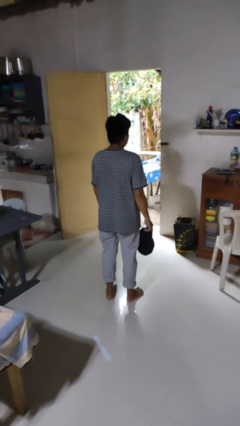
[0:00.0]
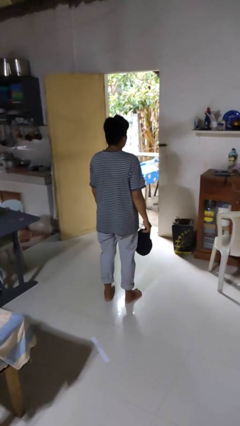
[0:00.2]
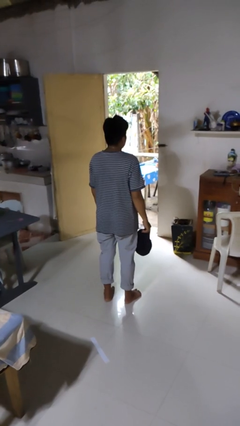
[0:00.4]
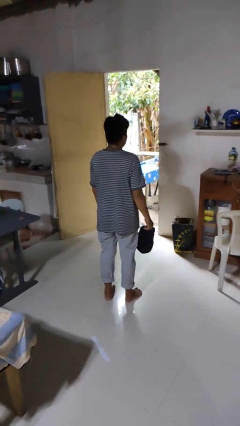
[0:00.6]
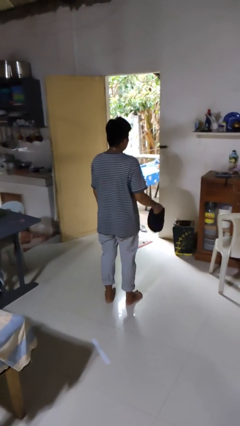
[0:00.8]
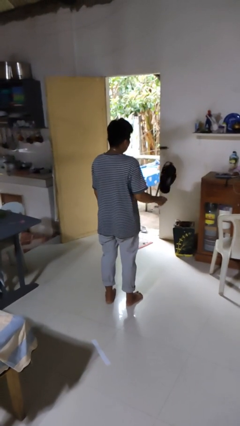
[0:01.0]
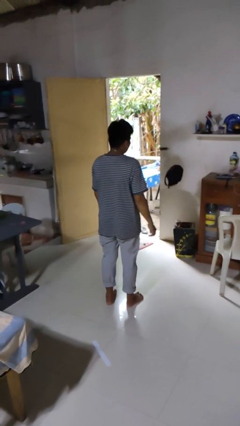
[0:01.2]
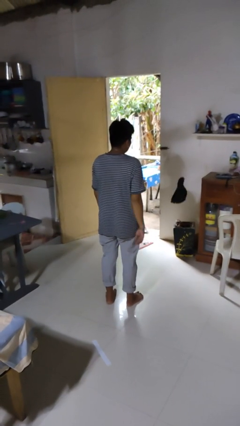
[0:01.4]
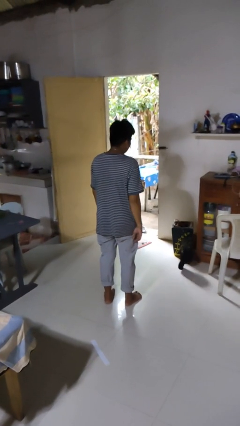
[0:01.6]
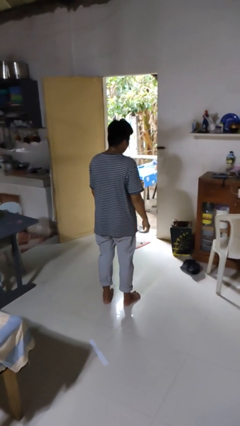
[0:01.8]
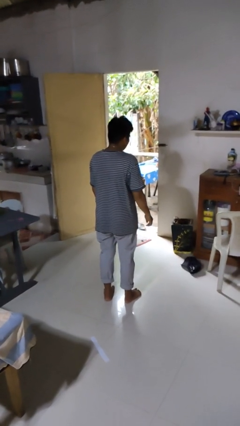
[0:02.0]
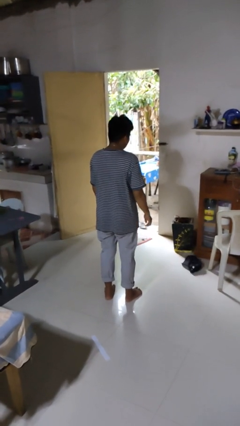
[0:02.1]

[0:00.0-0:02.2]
person throws object into air

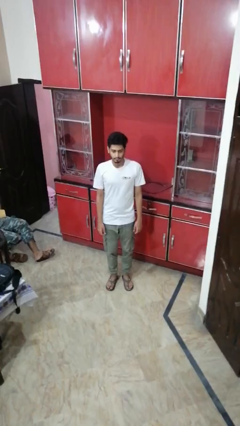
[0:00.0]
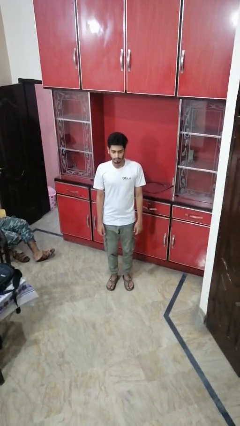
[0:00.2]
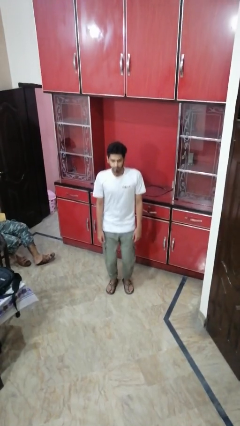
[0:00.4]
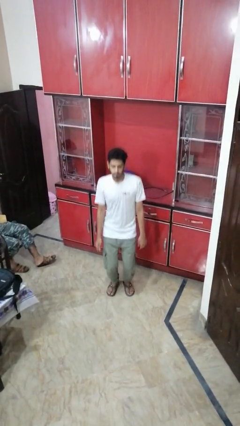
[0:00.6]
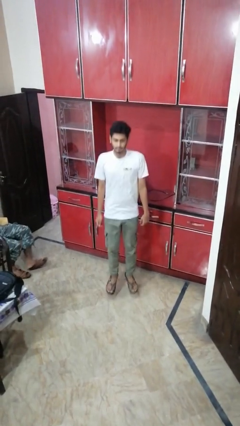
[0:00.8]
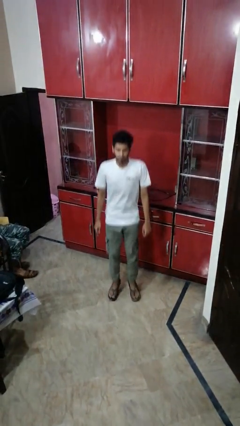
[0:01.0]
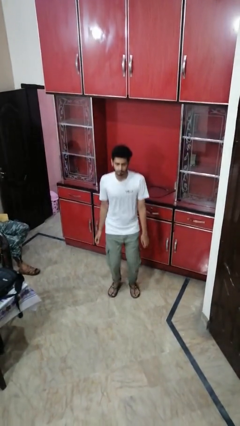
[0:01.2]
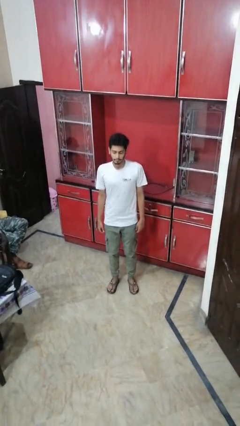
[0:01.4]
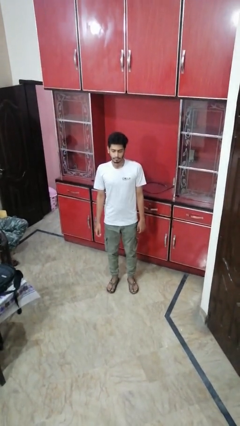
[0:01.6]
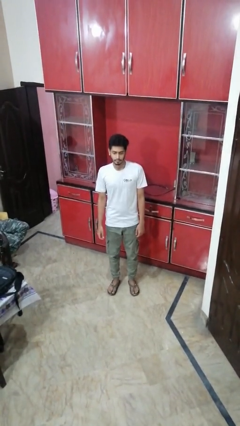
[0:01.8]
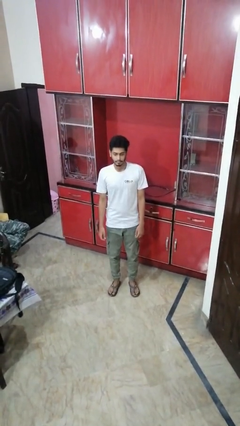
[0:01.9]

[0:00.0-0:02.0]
person jumps

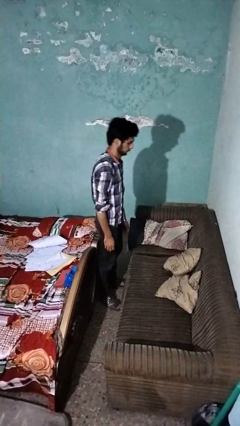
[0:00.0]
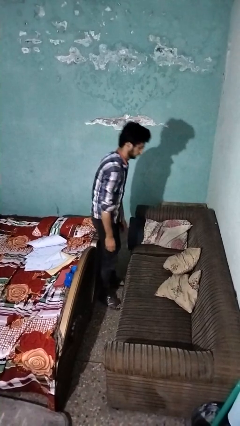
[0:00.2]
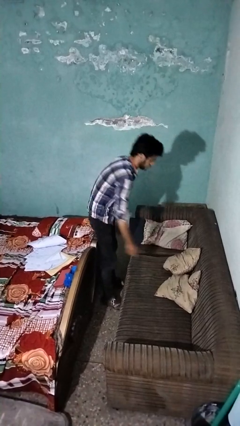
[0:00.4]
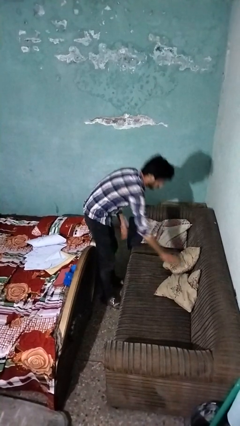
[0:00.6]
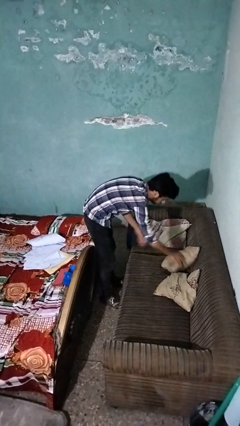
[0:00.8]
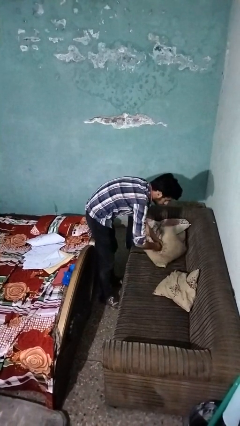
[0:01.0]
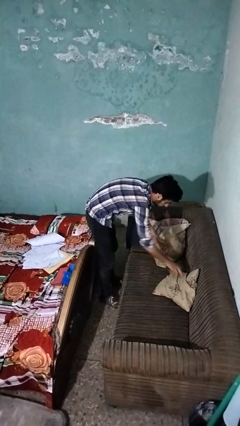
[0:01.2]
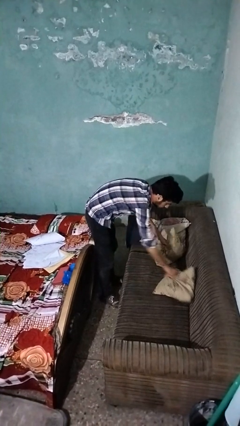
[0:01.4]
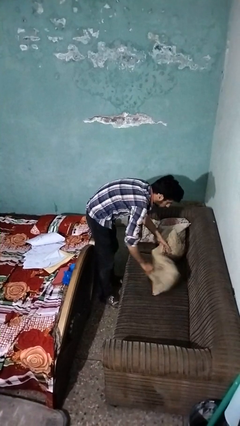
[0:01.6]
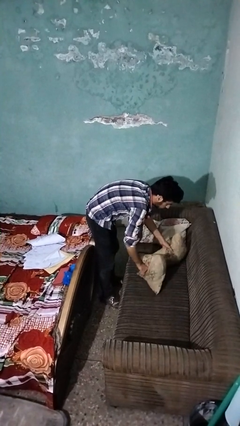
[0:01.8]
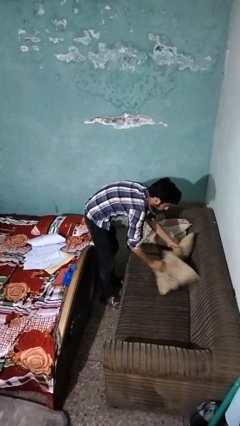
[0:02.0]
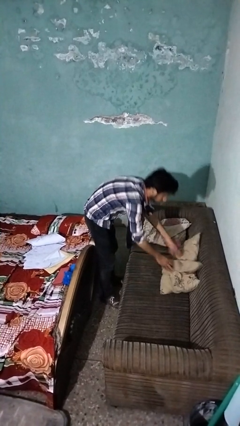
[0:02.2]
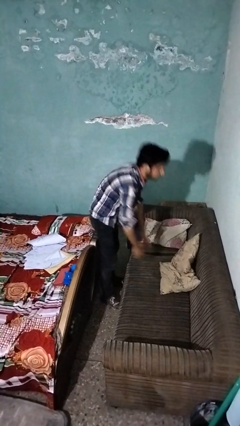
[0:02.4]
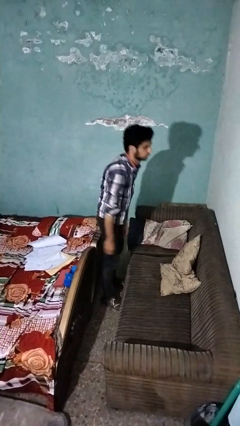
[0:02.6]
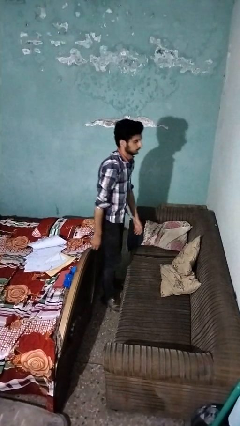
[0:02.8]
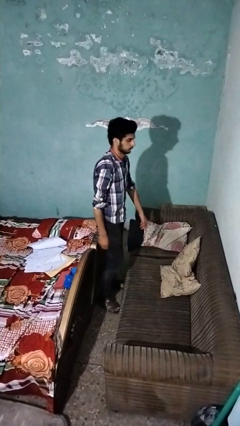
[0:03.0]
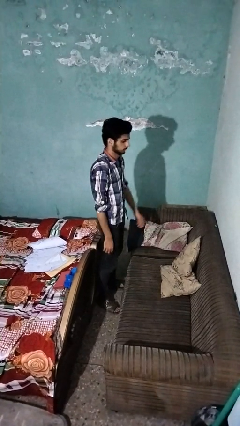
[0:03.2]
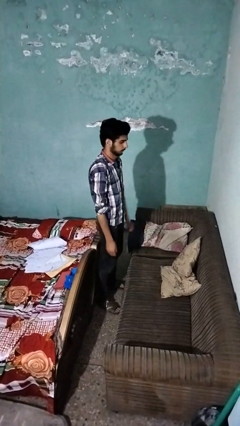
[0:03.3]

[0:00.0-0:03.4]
person searches in couch

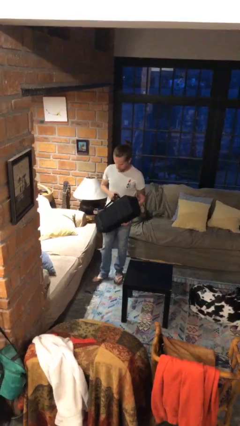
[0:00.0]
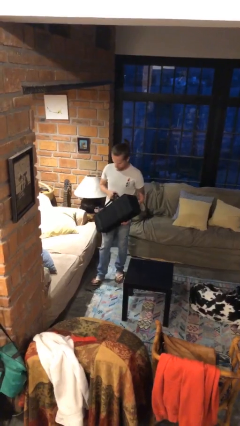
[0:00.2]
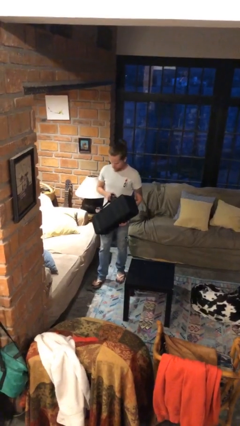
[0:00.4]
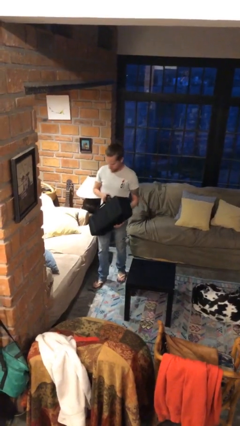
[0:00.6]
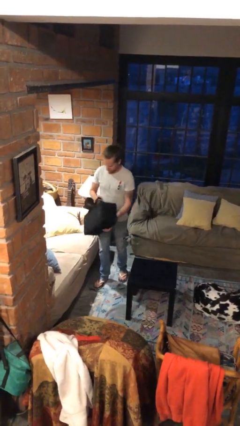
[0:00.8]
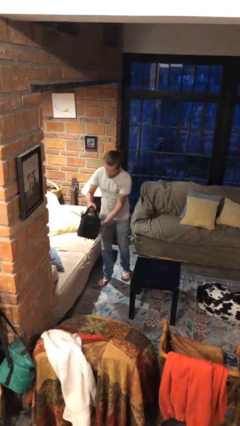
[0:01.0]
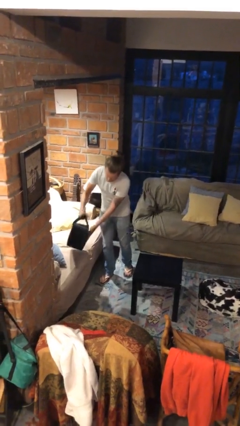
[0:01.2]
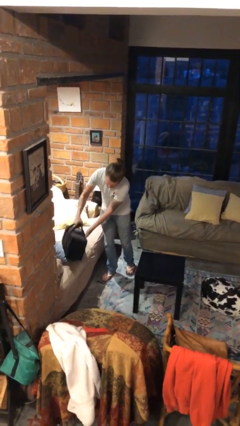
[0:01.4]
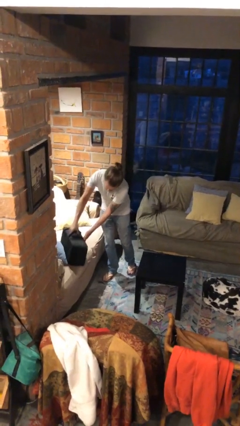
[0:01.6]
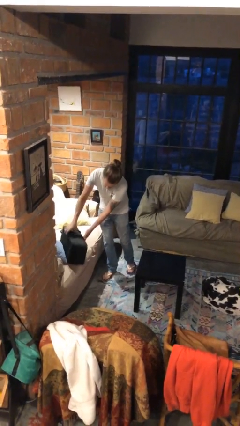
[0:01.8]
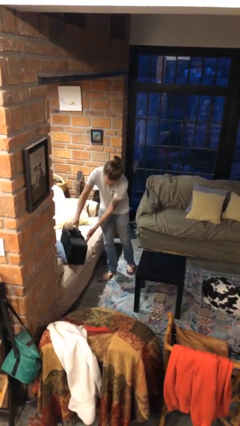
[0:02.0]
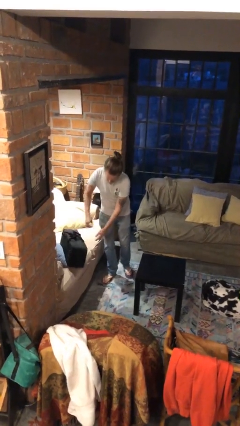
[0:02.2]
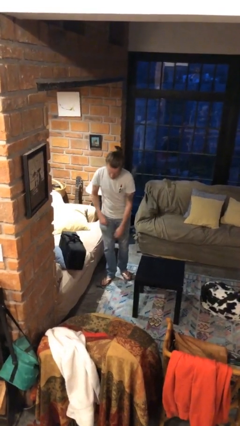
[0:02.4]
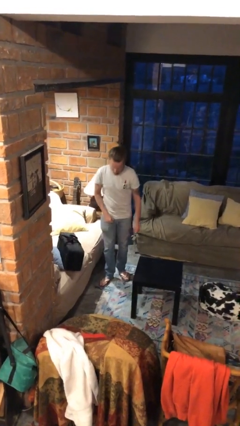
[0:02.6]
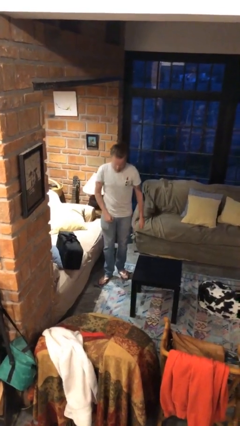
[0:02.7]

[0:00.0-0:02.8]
person puts down object on couch

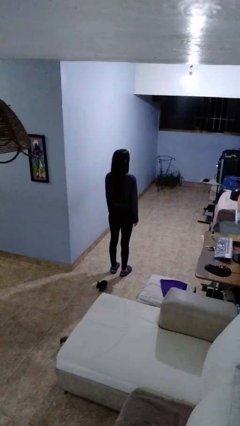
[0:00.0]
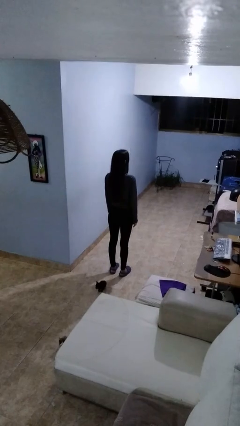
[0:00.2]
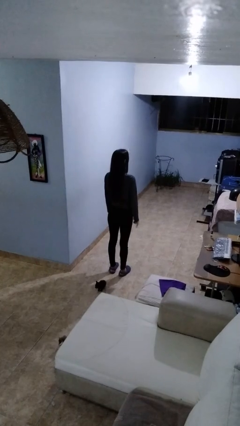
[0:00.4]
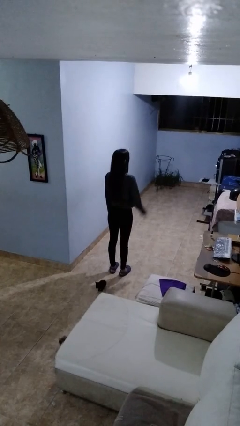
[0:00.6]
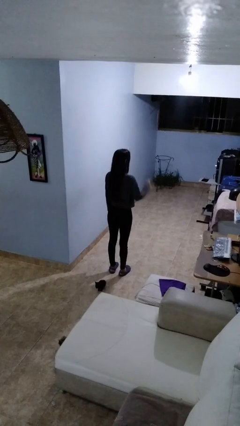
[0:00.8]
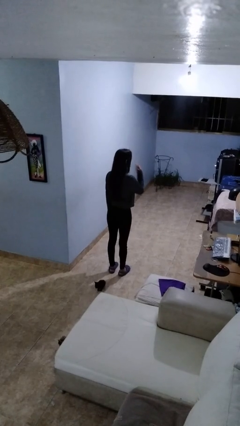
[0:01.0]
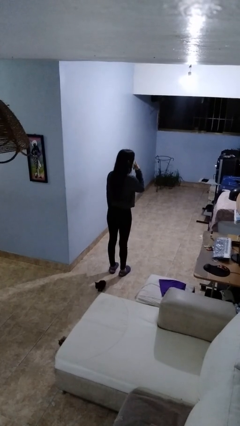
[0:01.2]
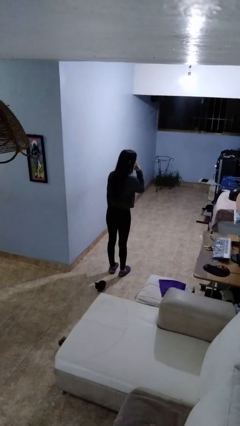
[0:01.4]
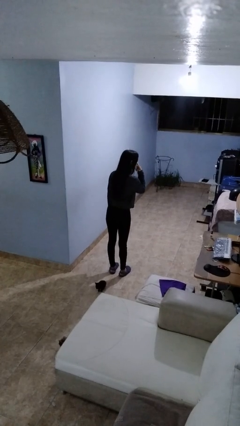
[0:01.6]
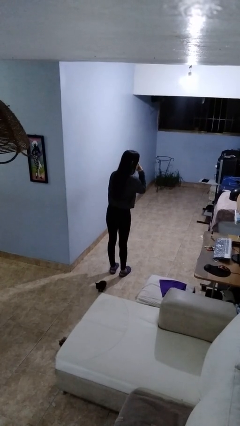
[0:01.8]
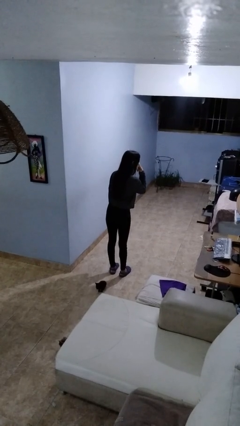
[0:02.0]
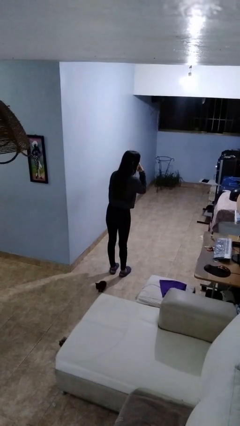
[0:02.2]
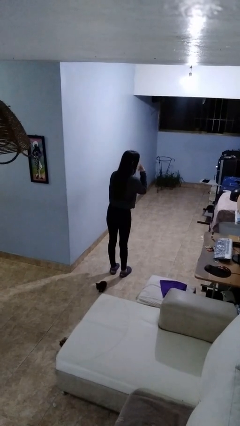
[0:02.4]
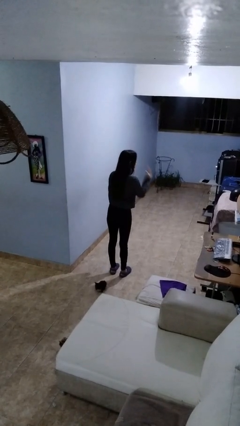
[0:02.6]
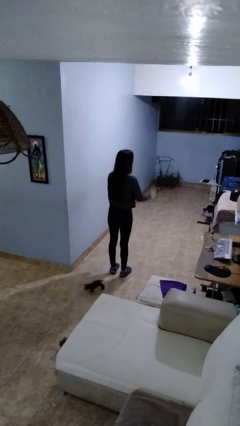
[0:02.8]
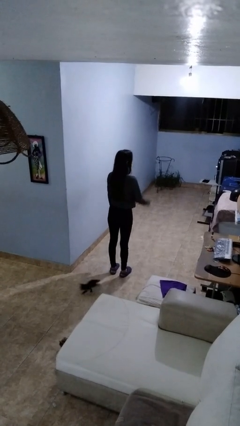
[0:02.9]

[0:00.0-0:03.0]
person gestures watch closely

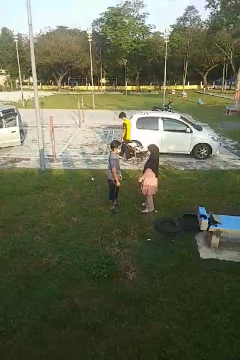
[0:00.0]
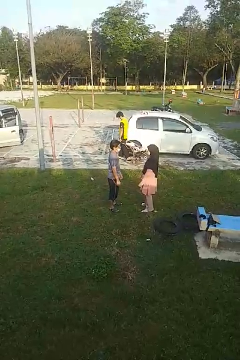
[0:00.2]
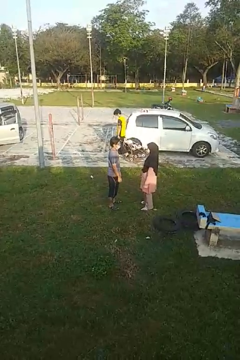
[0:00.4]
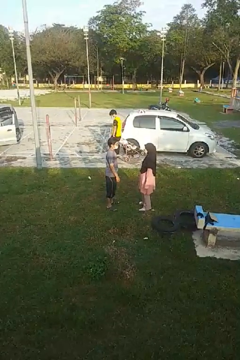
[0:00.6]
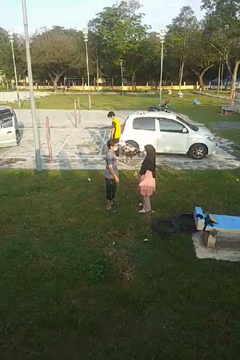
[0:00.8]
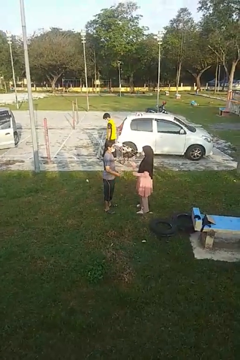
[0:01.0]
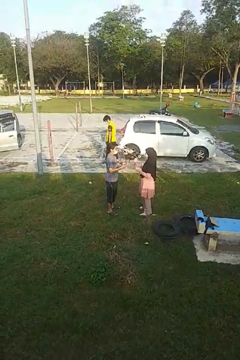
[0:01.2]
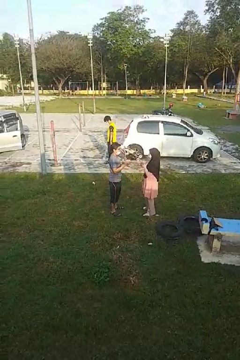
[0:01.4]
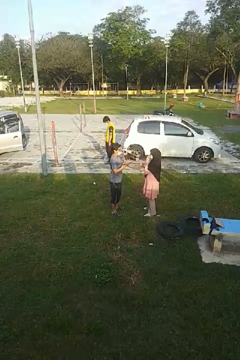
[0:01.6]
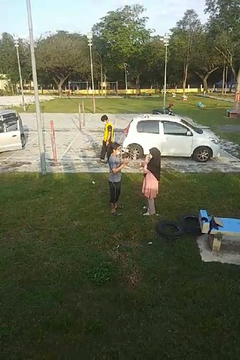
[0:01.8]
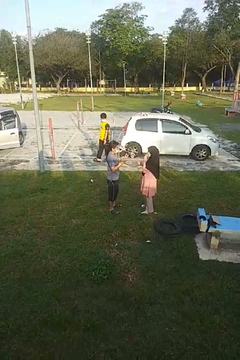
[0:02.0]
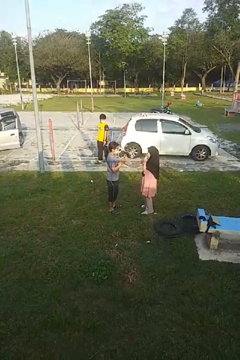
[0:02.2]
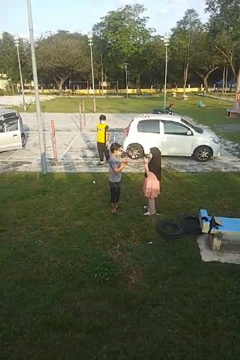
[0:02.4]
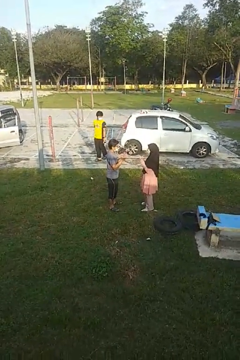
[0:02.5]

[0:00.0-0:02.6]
person talks to person

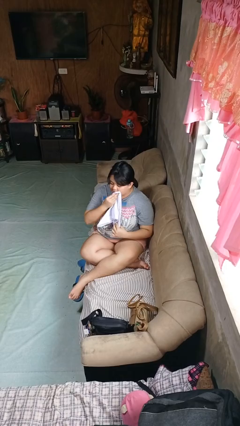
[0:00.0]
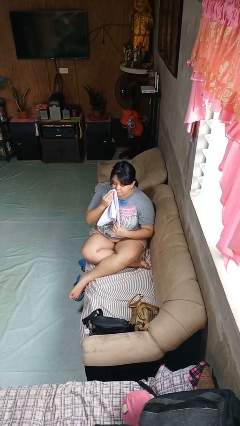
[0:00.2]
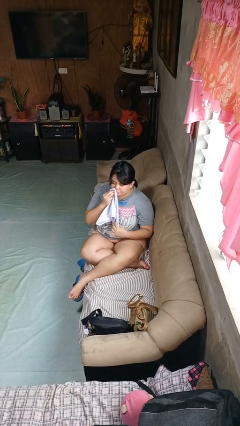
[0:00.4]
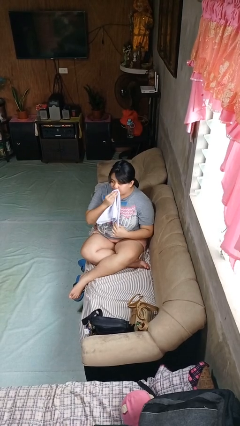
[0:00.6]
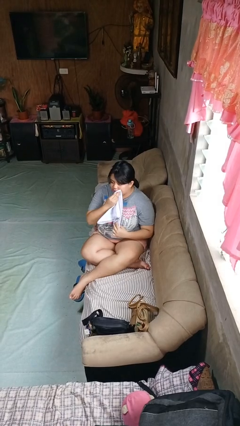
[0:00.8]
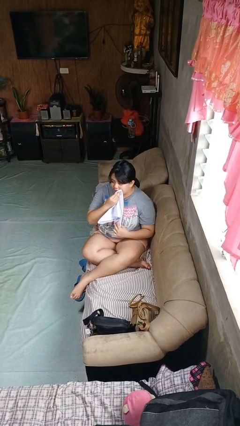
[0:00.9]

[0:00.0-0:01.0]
person wipes mouth with napkin

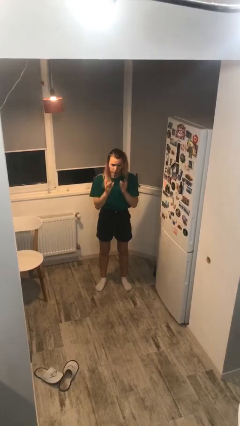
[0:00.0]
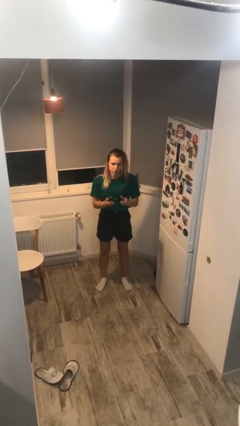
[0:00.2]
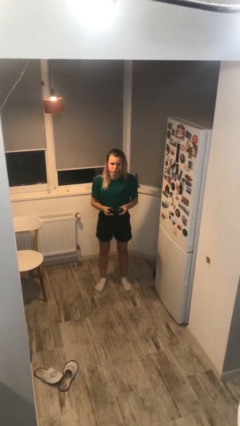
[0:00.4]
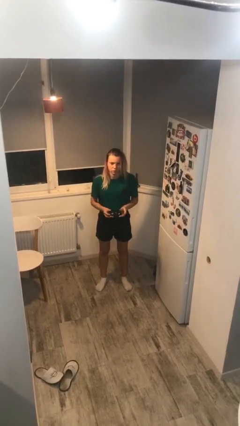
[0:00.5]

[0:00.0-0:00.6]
person takes off glasses
